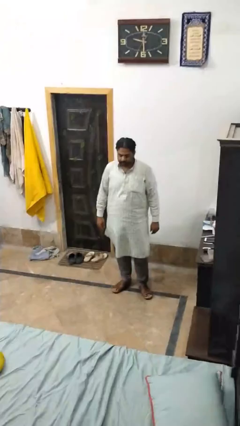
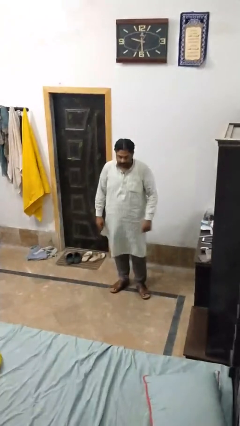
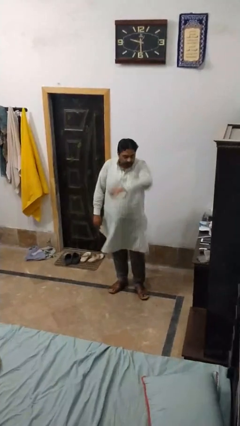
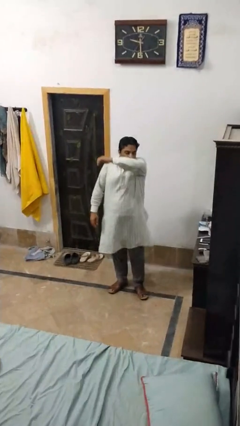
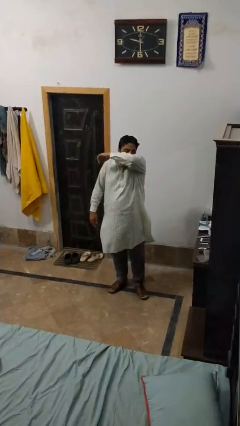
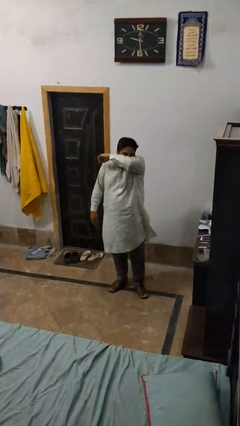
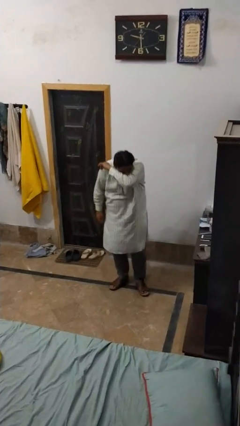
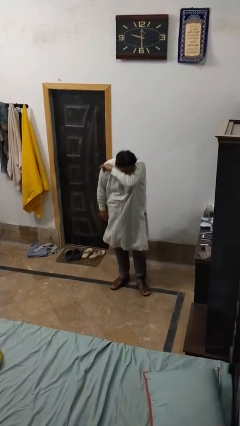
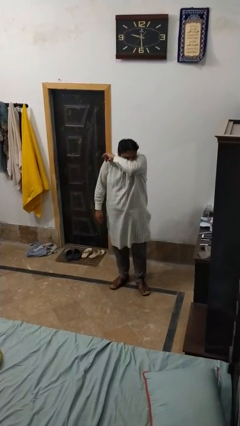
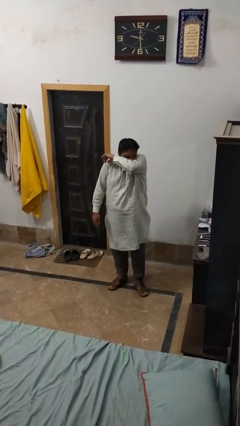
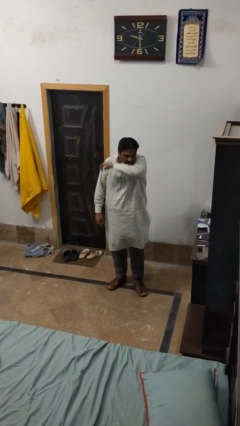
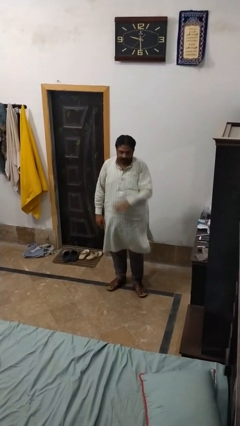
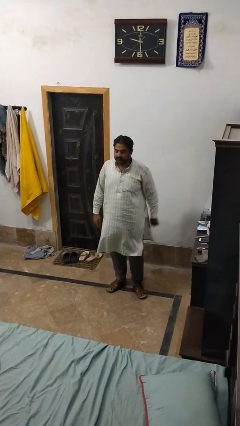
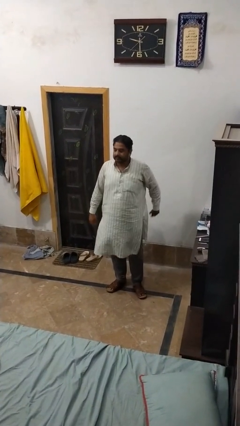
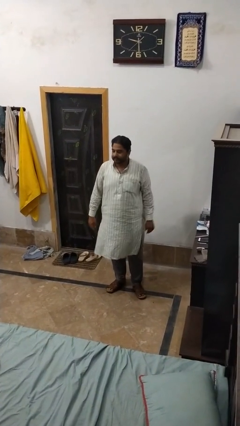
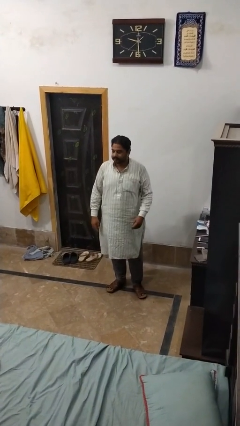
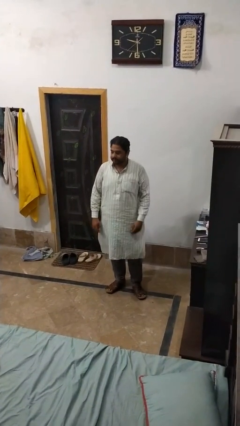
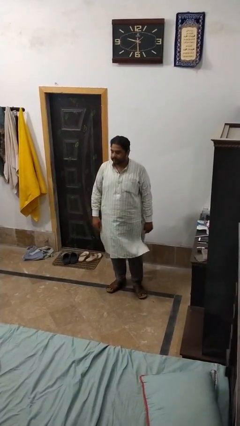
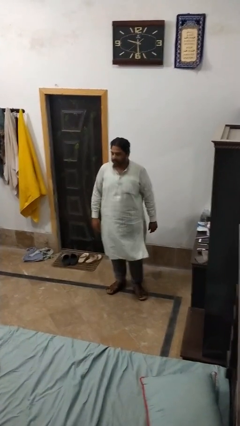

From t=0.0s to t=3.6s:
person sneezes into arm

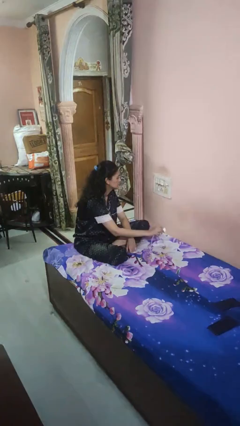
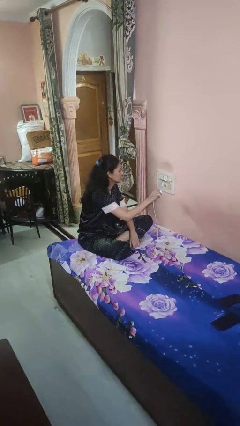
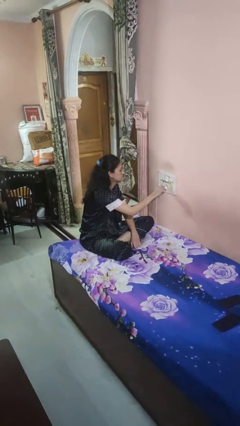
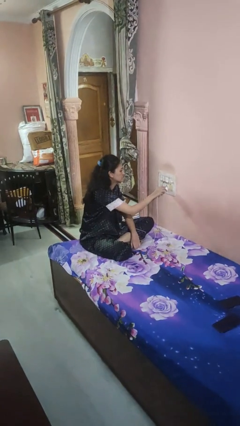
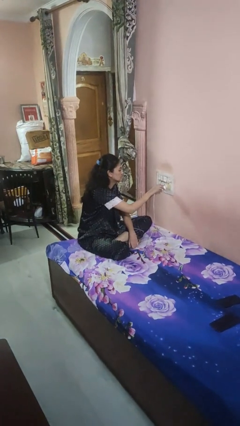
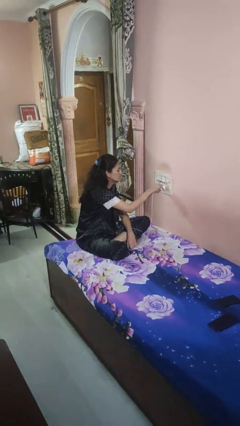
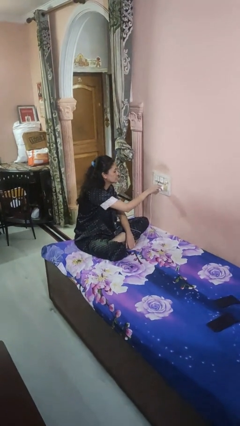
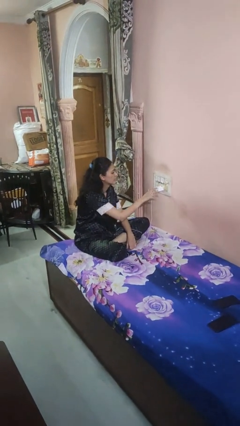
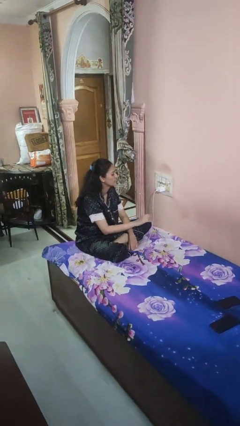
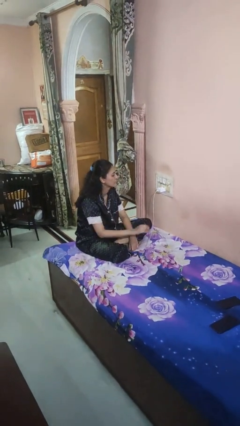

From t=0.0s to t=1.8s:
person plugs into electrical socket

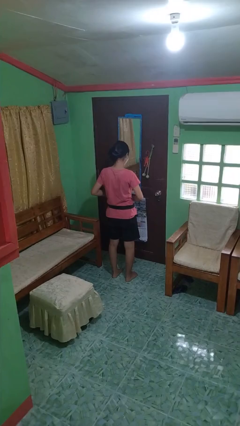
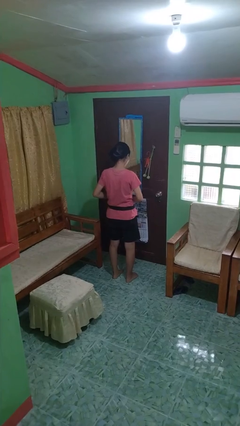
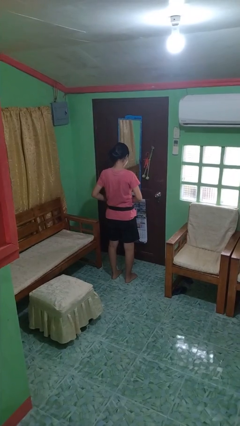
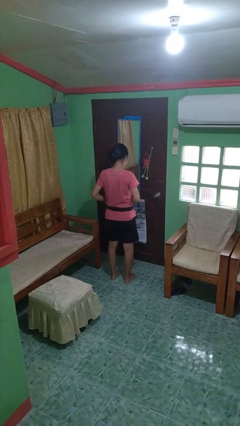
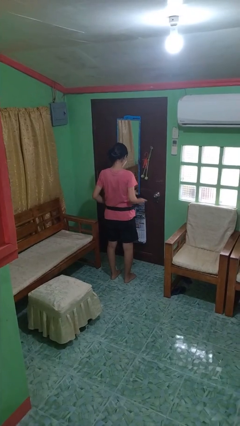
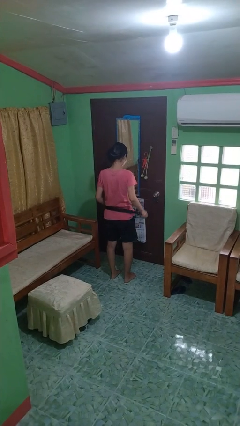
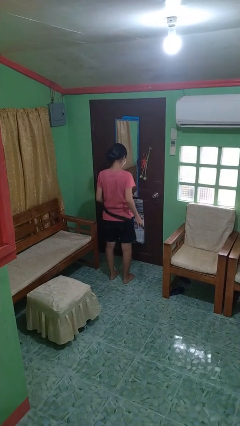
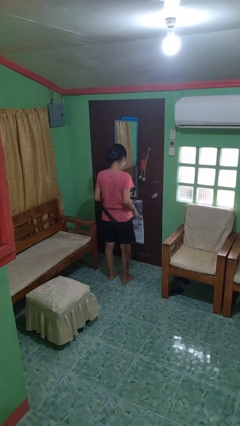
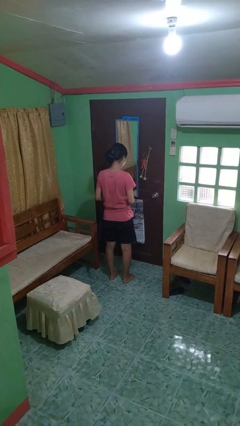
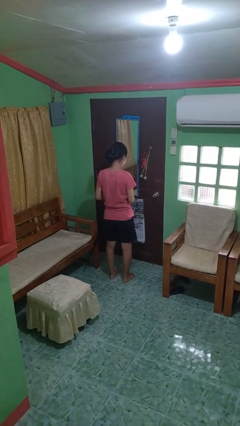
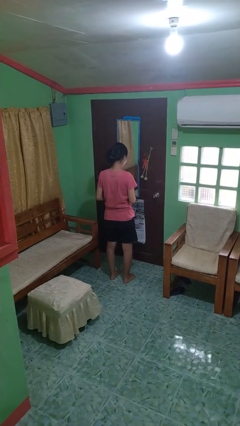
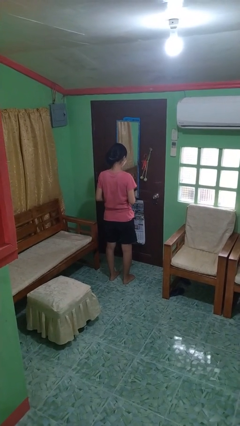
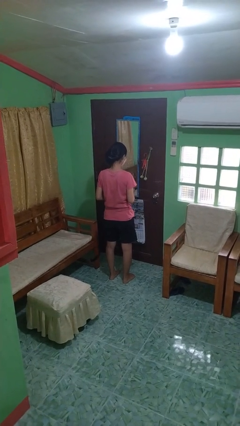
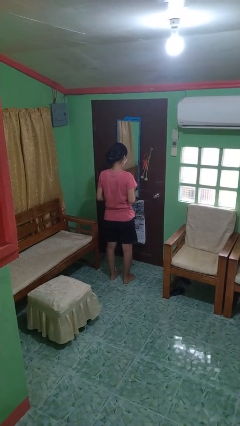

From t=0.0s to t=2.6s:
person takes off belt

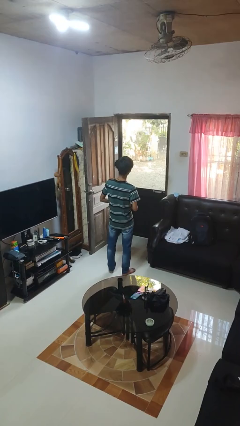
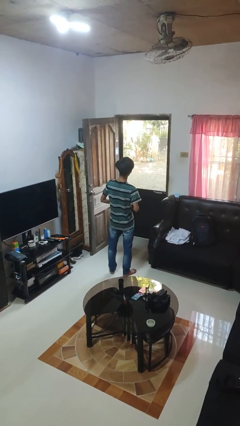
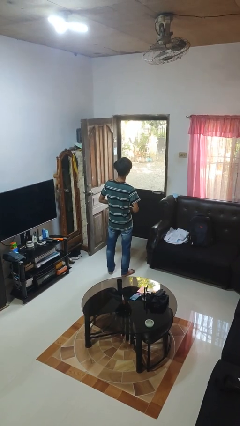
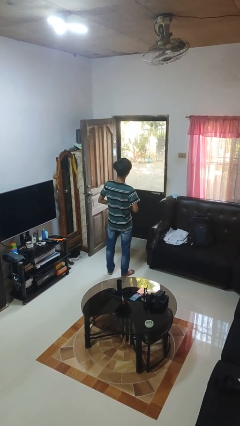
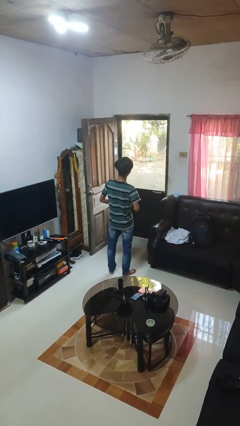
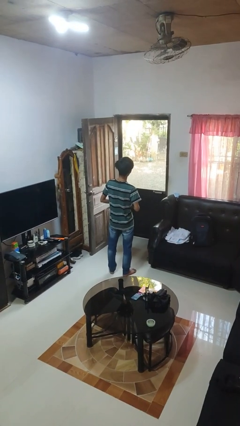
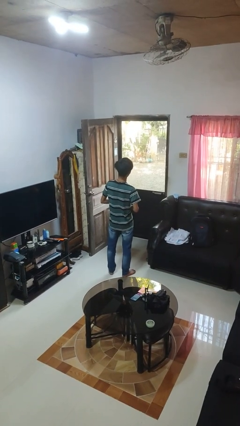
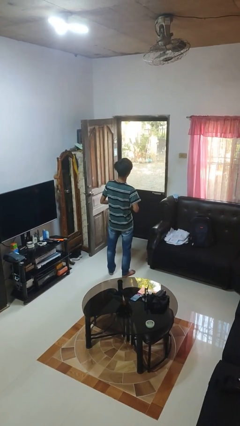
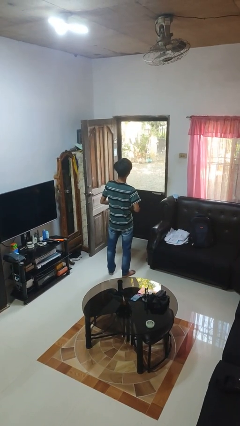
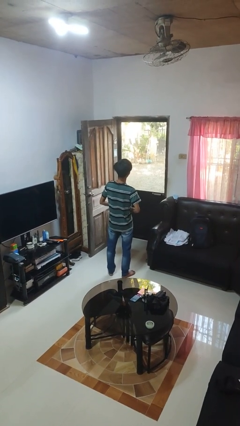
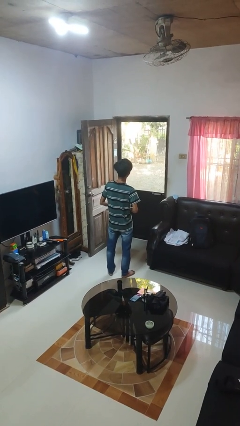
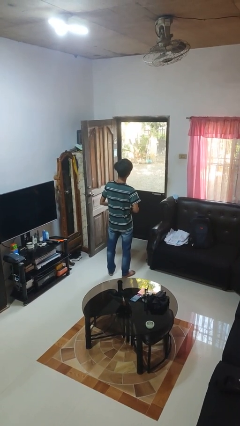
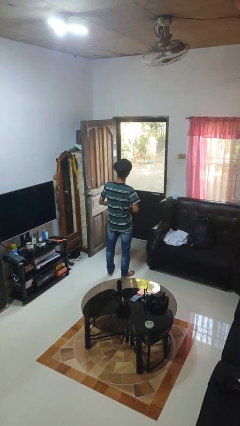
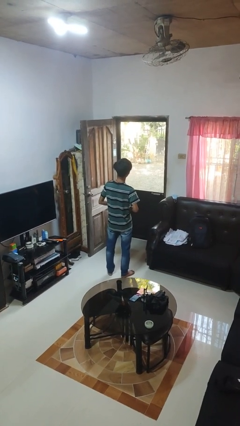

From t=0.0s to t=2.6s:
person buttons shirt

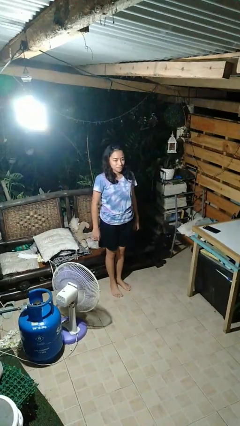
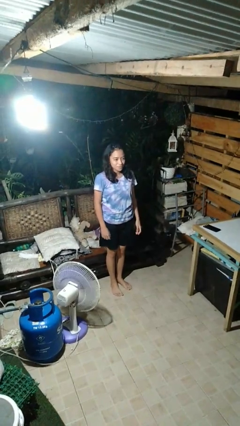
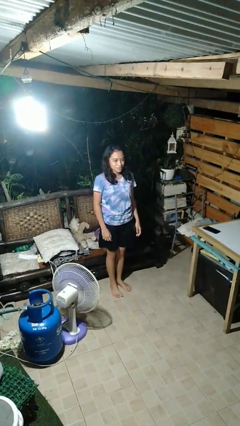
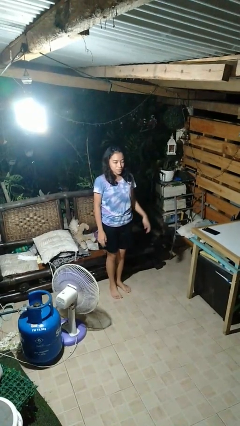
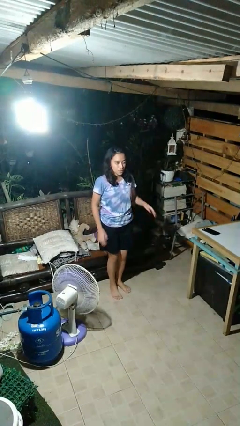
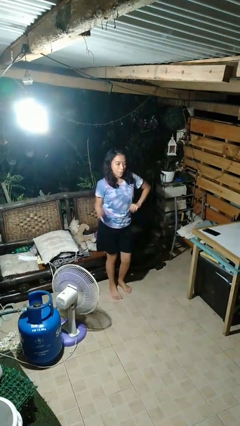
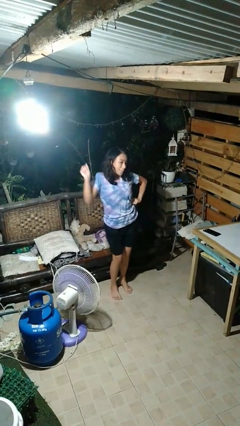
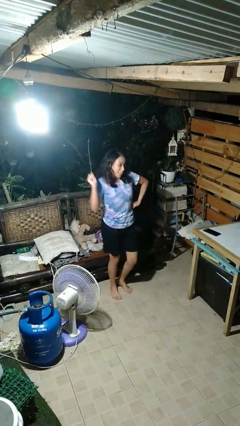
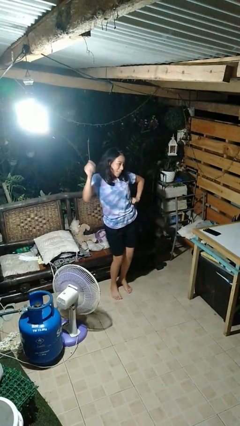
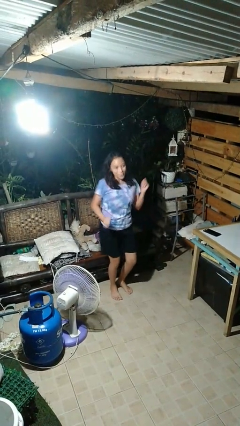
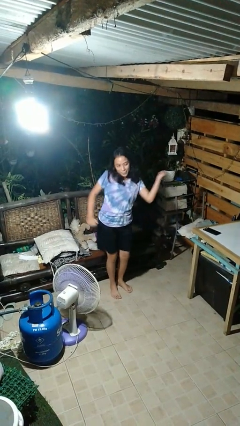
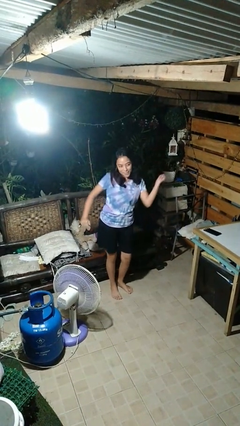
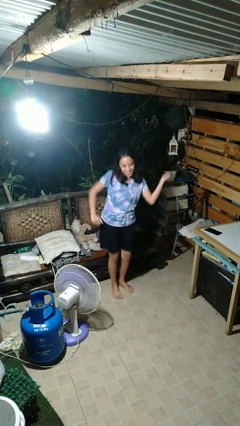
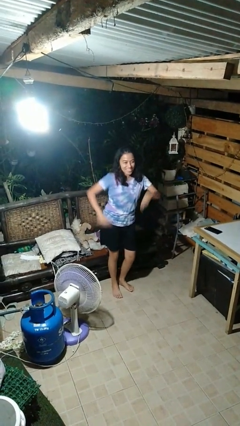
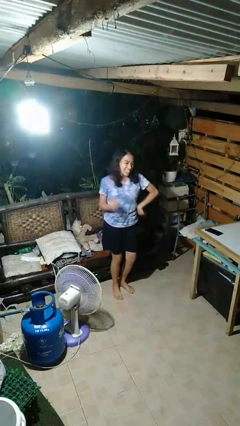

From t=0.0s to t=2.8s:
person dances in place

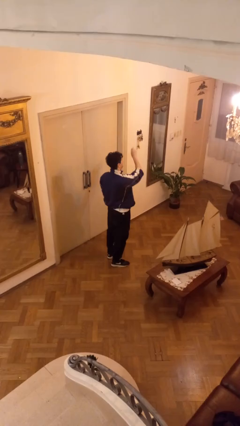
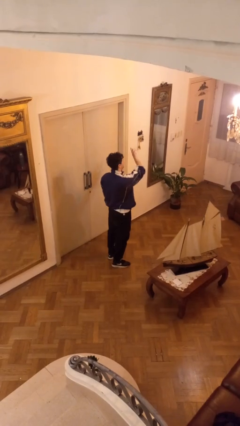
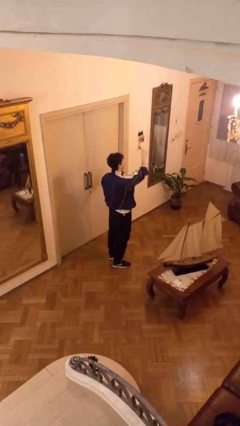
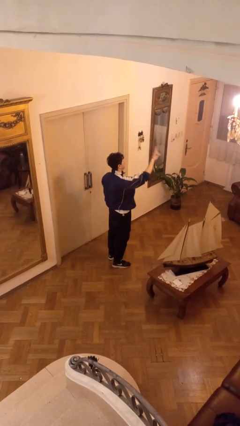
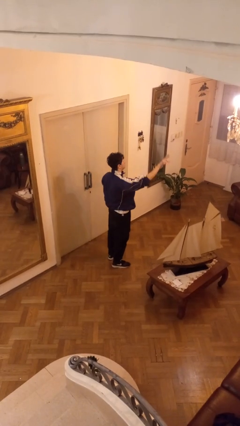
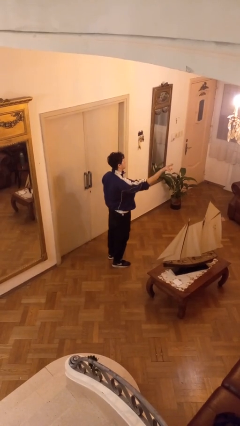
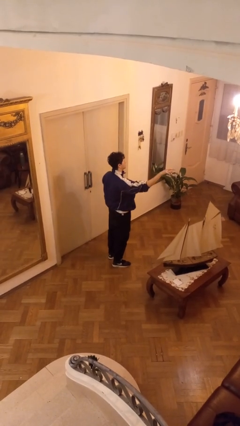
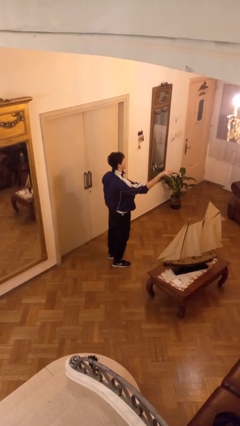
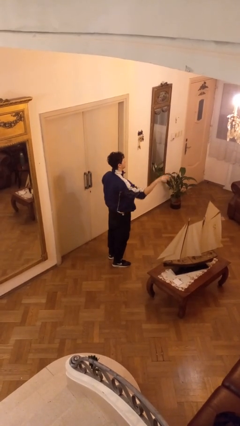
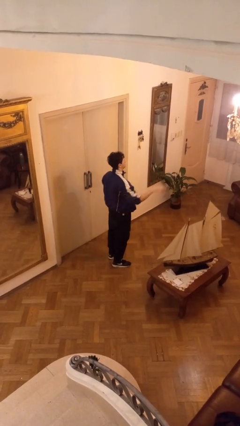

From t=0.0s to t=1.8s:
person gestures swipe right

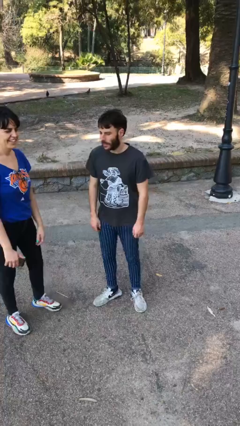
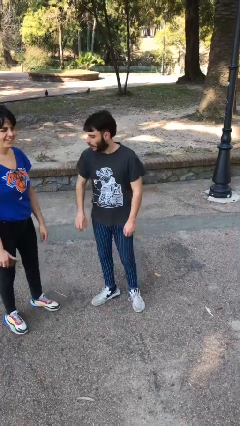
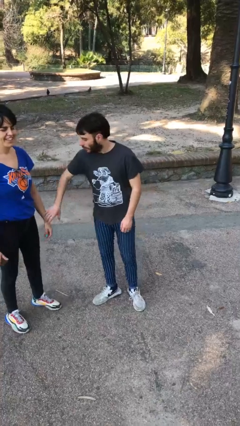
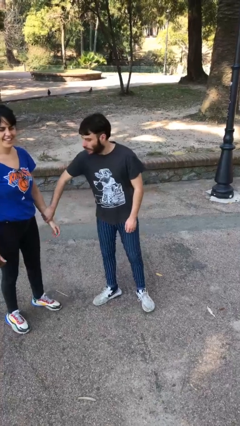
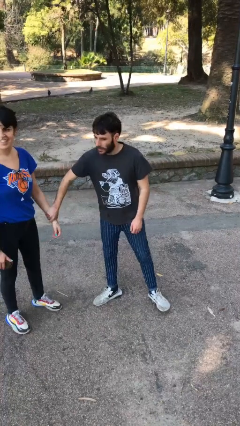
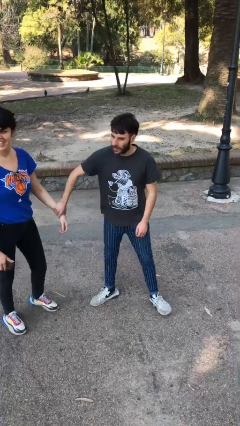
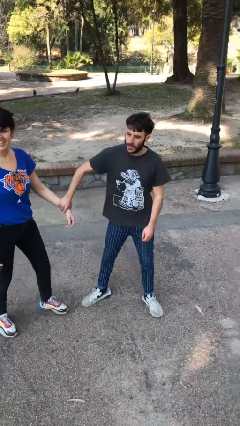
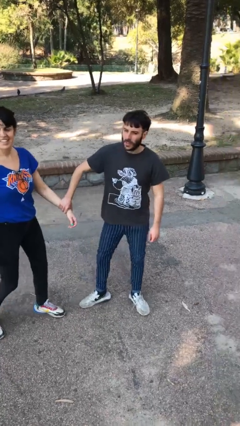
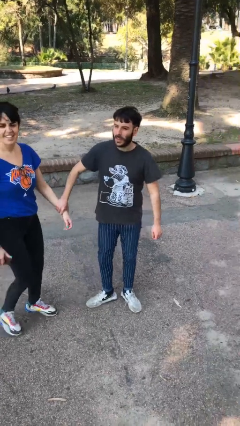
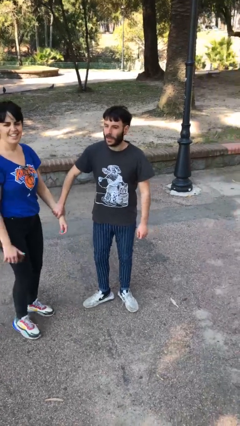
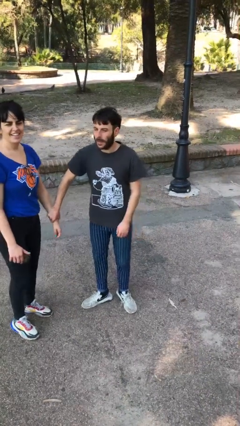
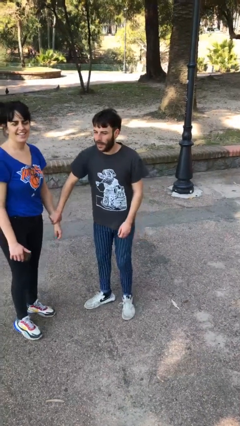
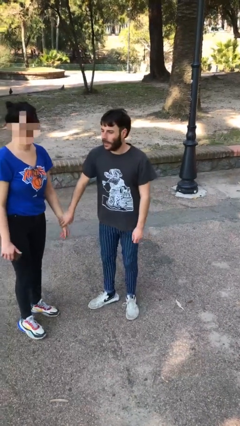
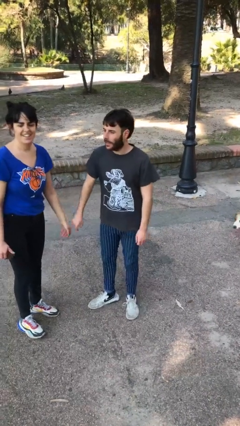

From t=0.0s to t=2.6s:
person grabs person by forearm
